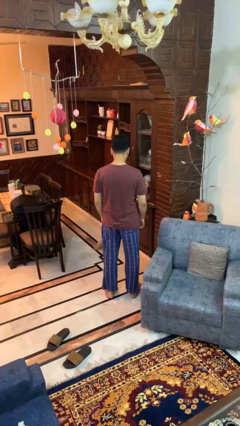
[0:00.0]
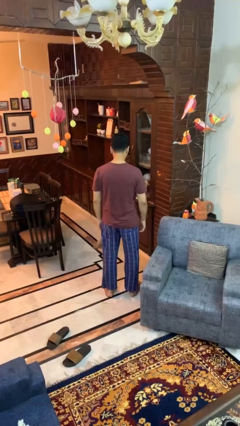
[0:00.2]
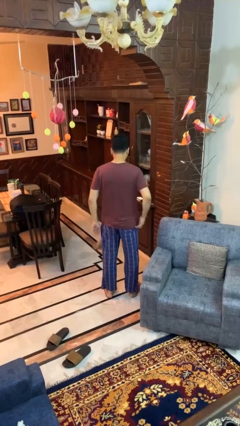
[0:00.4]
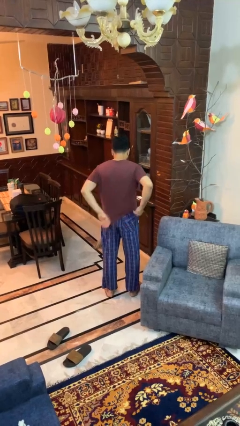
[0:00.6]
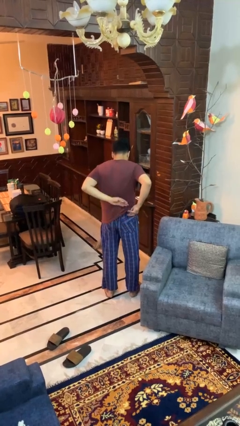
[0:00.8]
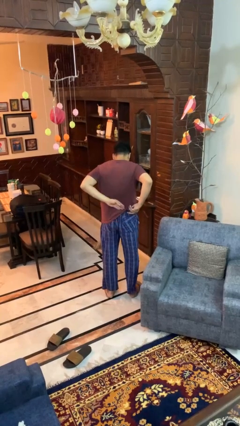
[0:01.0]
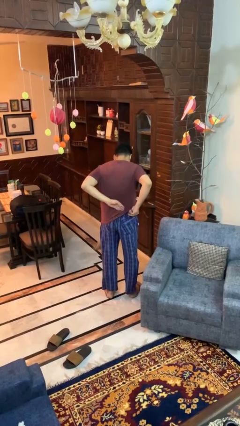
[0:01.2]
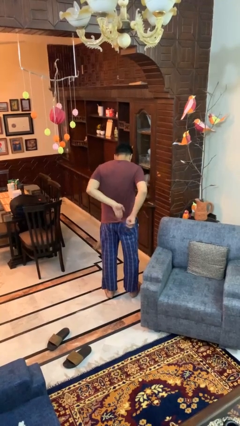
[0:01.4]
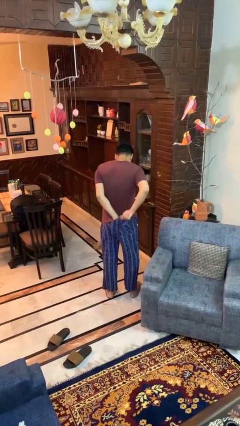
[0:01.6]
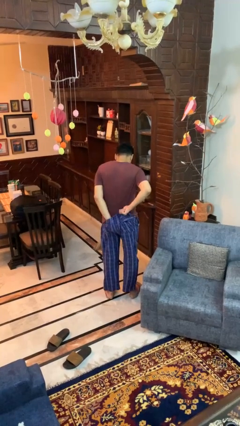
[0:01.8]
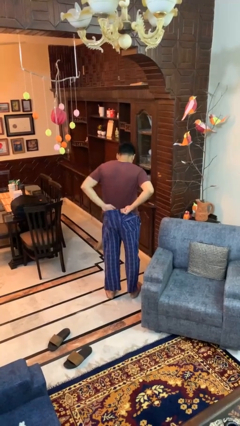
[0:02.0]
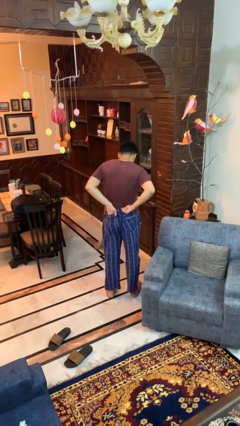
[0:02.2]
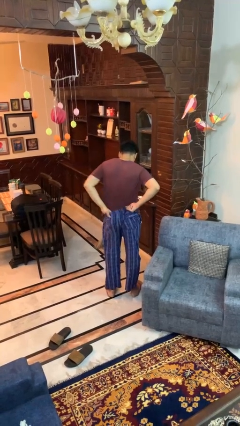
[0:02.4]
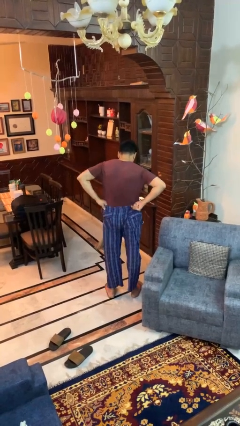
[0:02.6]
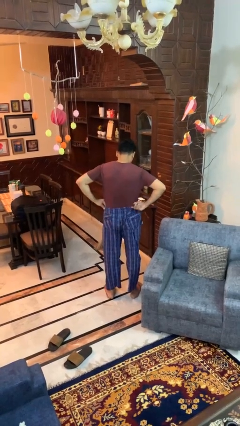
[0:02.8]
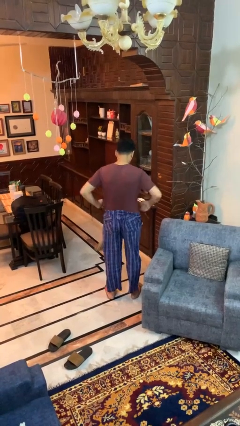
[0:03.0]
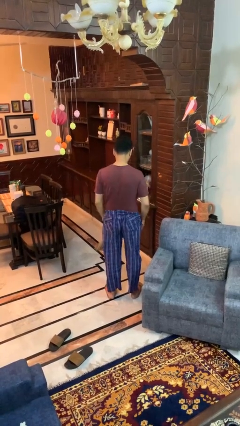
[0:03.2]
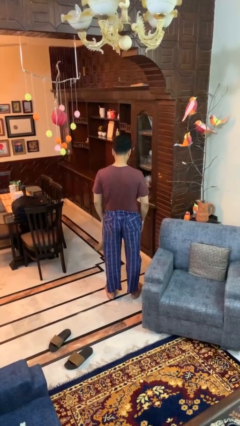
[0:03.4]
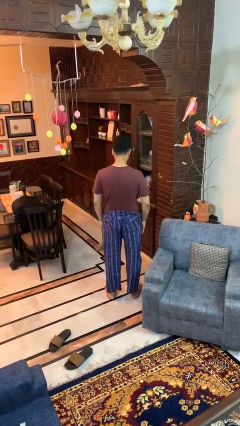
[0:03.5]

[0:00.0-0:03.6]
person tucks in shirt

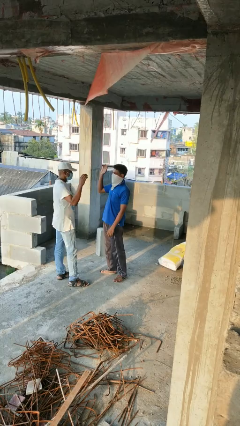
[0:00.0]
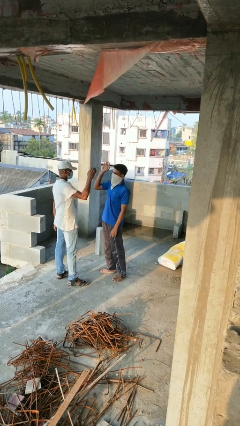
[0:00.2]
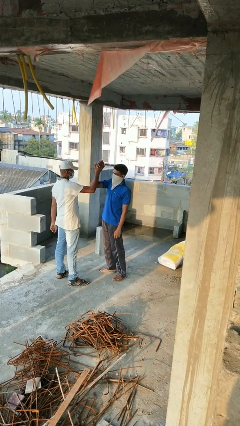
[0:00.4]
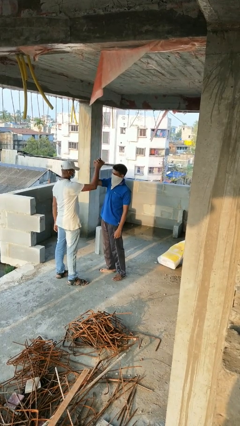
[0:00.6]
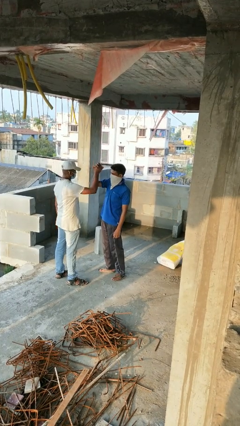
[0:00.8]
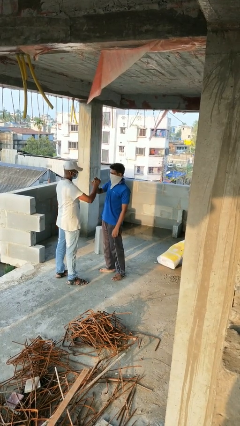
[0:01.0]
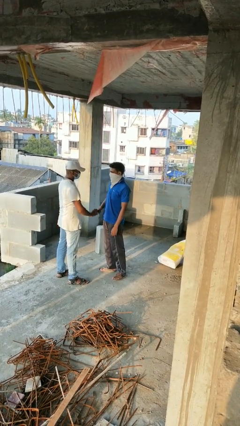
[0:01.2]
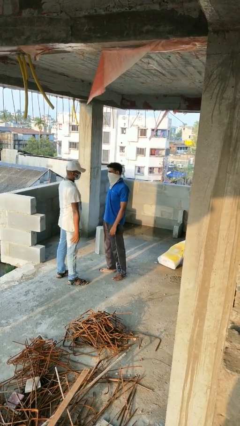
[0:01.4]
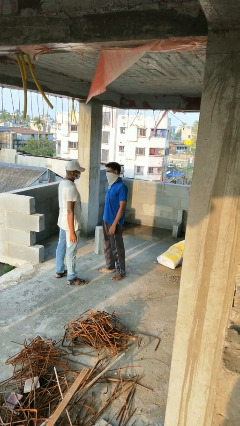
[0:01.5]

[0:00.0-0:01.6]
person highfives hand

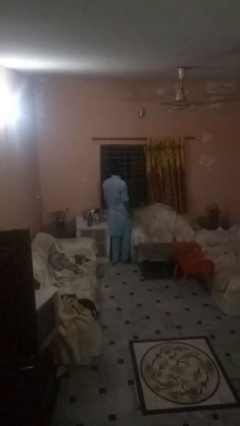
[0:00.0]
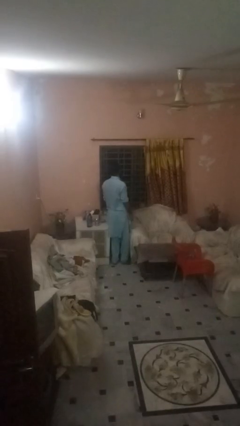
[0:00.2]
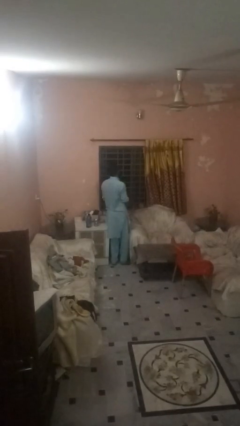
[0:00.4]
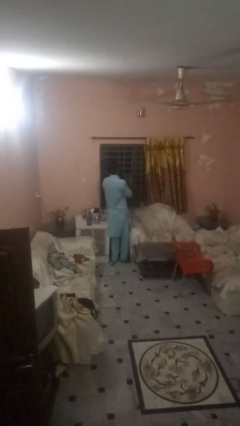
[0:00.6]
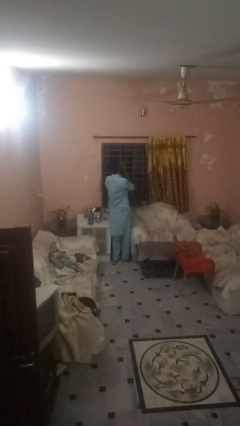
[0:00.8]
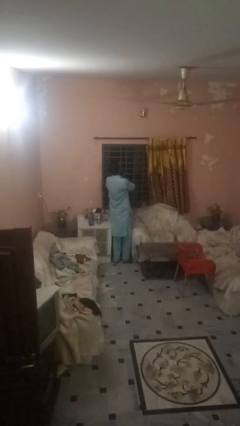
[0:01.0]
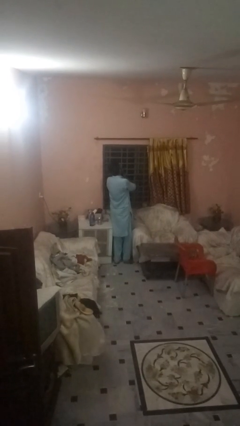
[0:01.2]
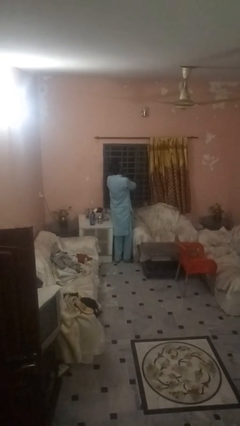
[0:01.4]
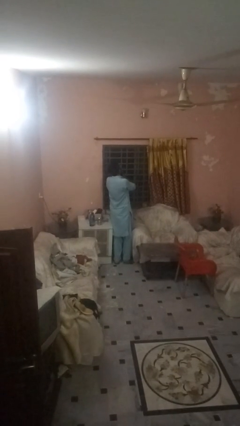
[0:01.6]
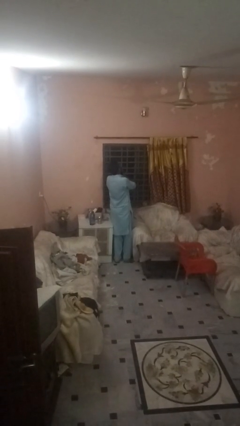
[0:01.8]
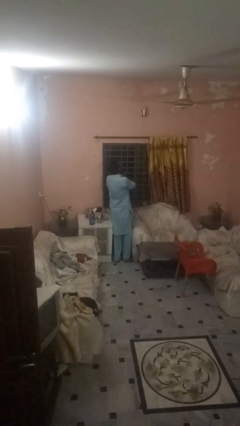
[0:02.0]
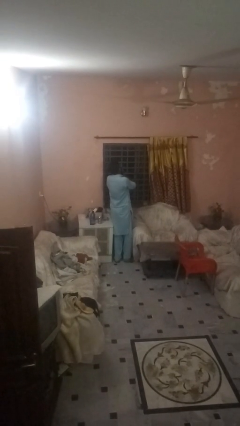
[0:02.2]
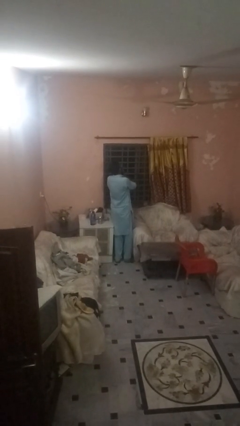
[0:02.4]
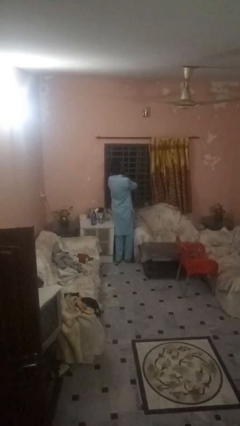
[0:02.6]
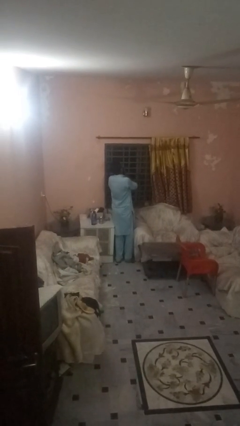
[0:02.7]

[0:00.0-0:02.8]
person covers face with hands

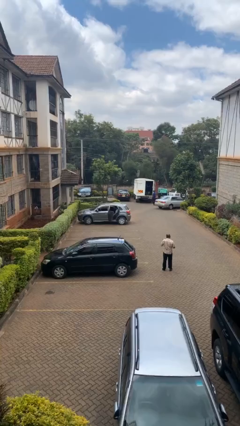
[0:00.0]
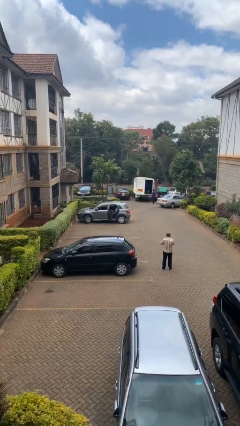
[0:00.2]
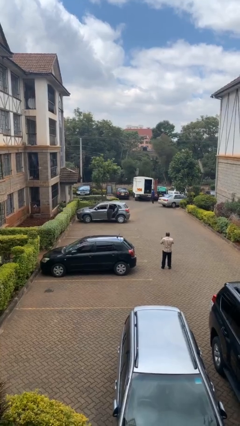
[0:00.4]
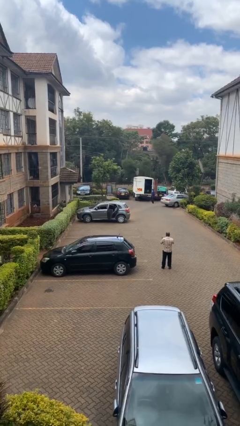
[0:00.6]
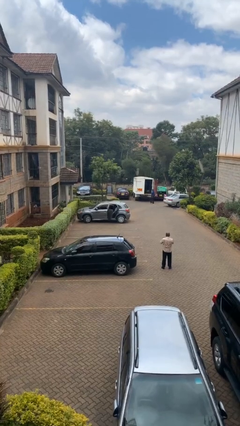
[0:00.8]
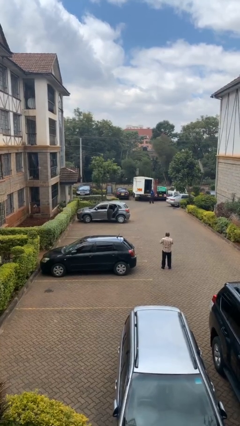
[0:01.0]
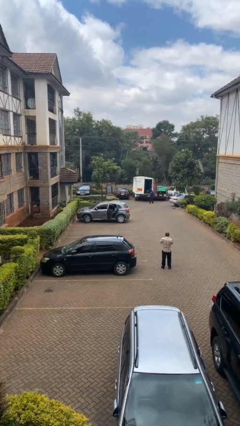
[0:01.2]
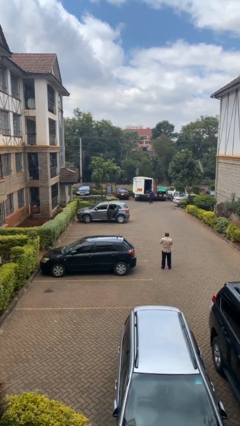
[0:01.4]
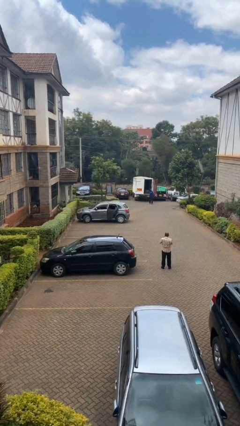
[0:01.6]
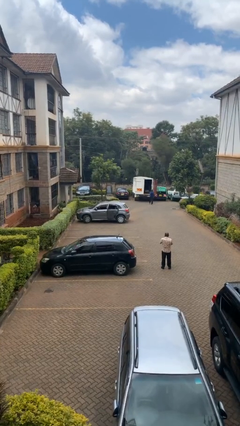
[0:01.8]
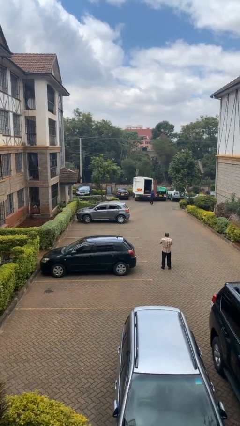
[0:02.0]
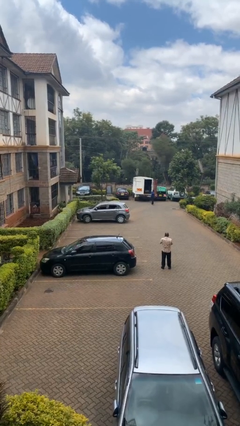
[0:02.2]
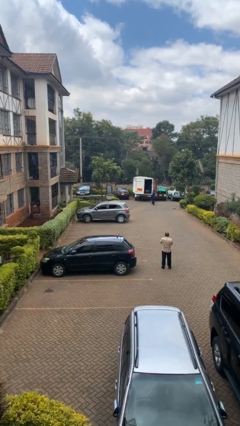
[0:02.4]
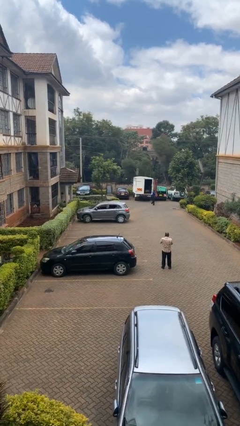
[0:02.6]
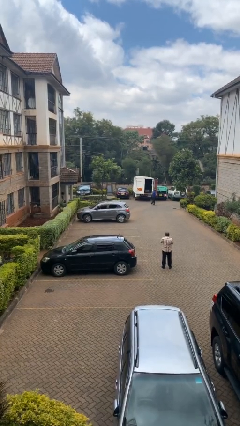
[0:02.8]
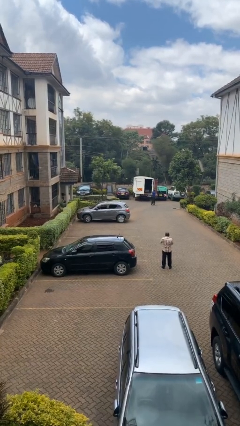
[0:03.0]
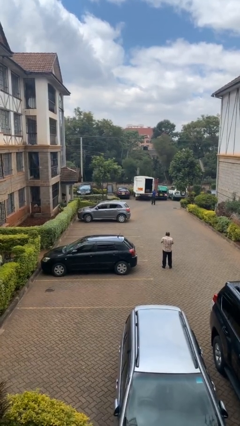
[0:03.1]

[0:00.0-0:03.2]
person closes car door

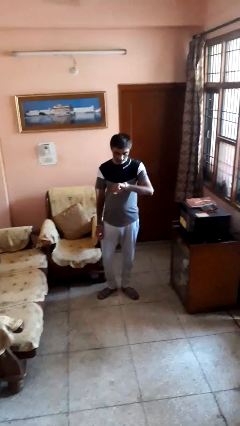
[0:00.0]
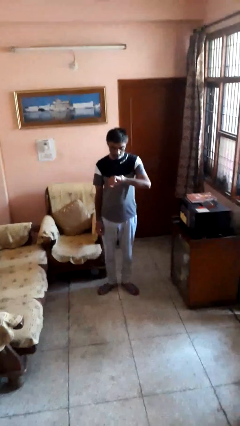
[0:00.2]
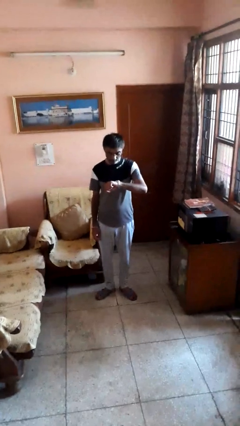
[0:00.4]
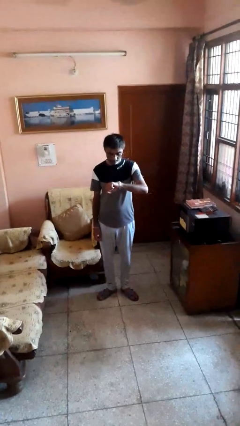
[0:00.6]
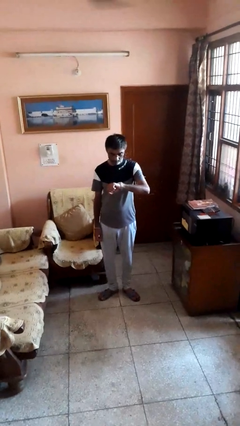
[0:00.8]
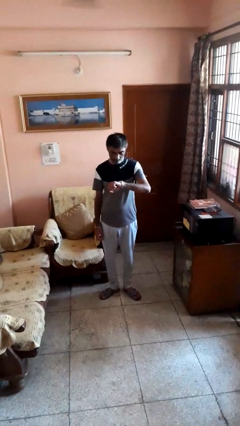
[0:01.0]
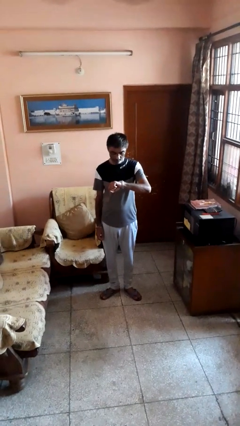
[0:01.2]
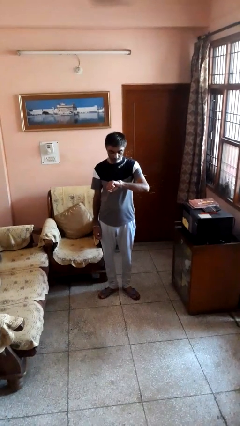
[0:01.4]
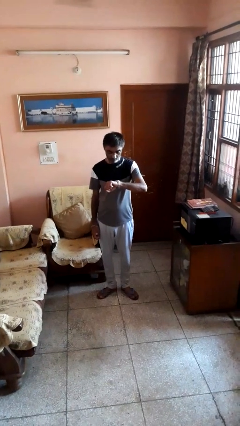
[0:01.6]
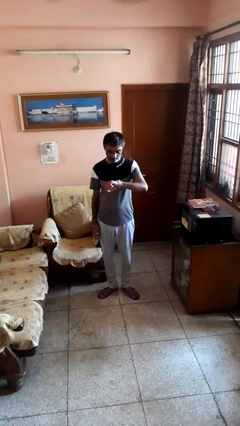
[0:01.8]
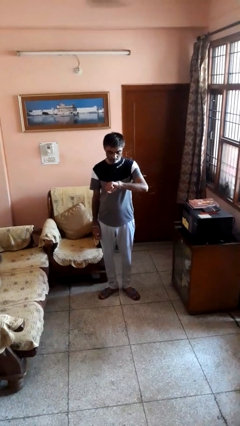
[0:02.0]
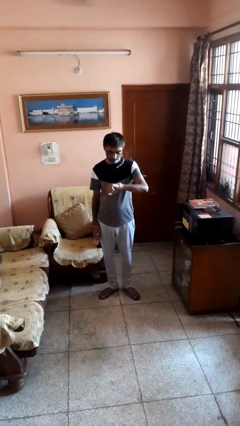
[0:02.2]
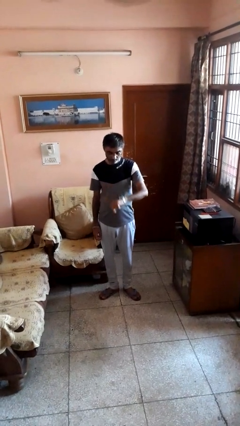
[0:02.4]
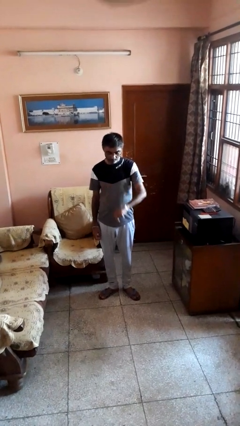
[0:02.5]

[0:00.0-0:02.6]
person looks at wristwatch

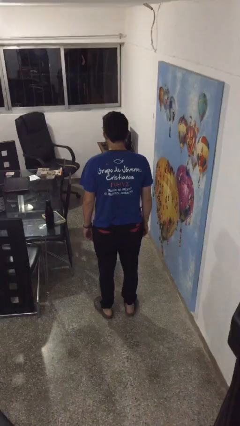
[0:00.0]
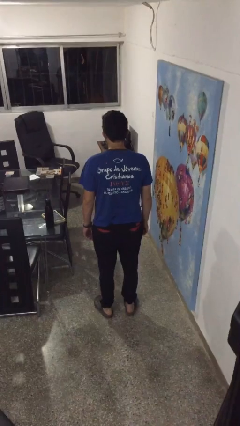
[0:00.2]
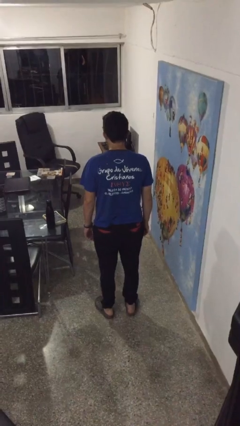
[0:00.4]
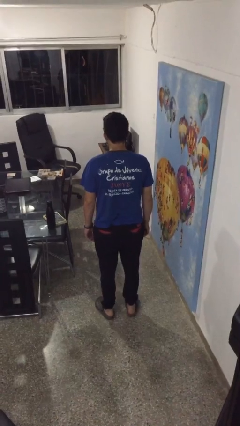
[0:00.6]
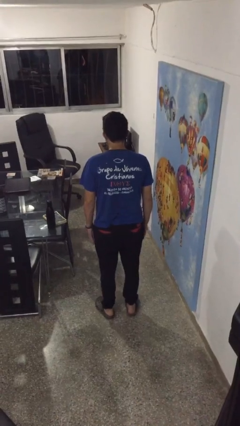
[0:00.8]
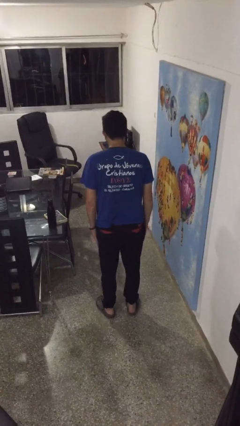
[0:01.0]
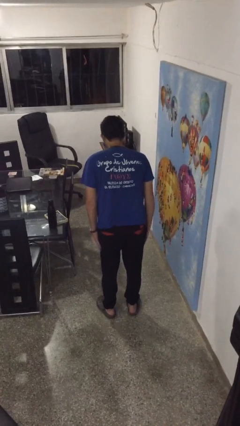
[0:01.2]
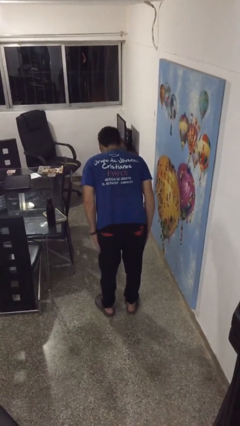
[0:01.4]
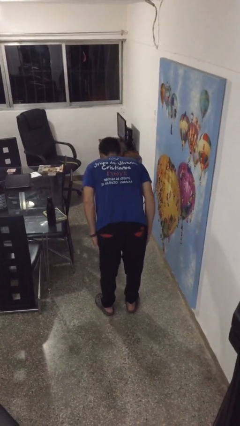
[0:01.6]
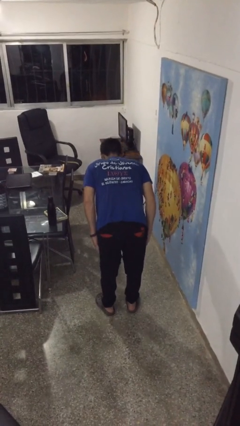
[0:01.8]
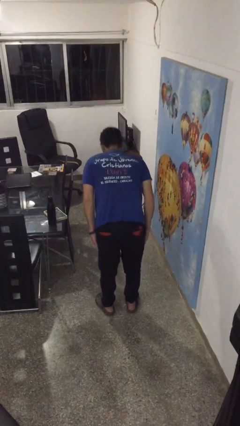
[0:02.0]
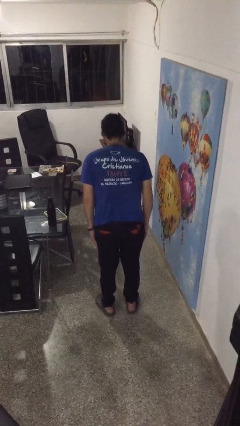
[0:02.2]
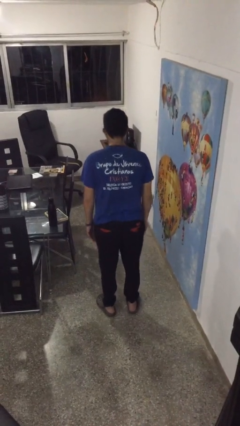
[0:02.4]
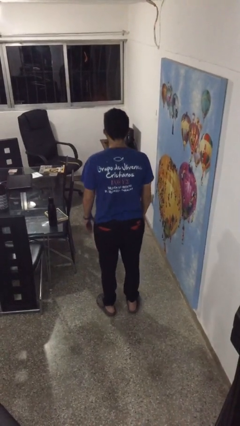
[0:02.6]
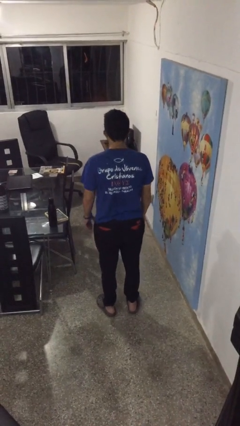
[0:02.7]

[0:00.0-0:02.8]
person bows

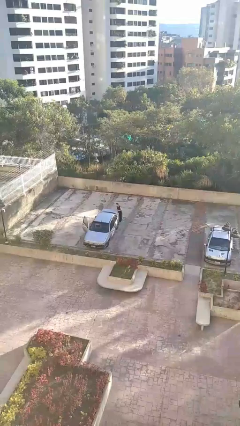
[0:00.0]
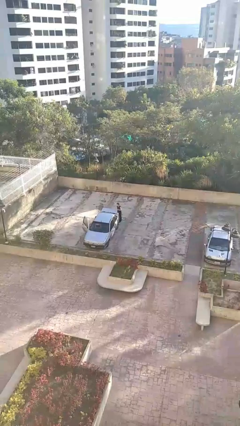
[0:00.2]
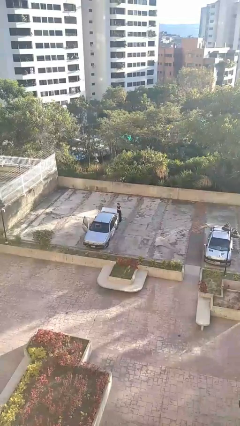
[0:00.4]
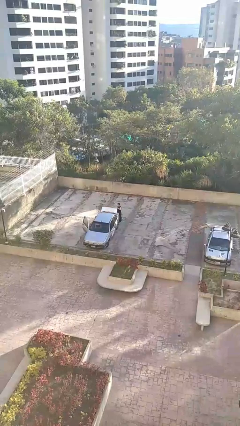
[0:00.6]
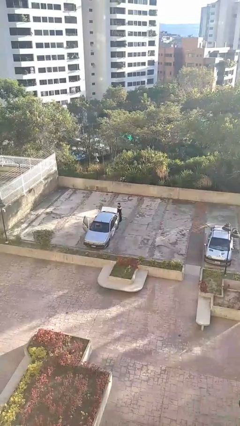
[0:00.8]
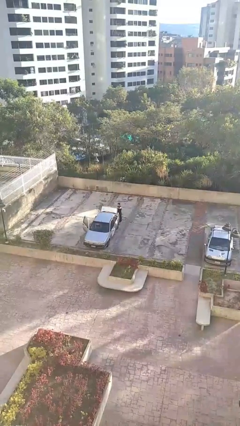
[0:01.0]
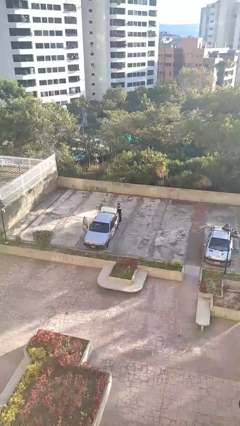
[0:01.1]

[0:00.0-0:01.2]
person opens car trunk
